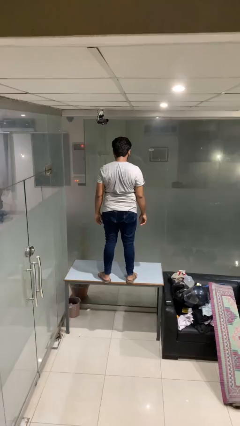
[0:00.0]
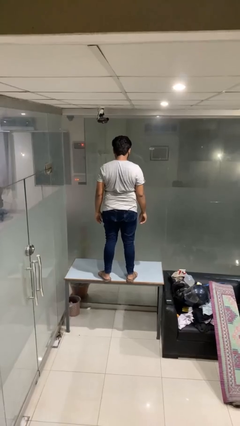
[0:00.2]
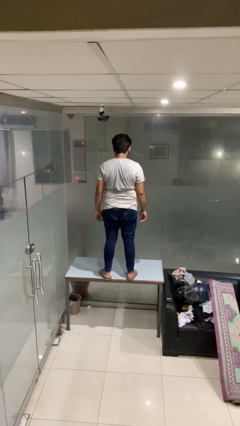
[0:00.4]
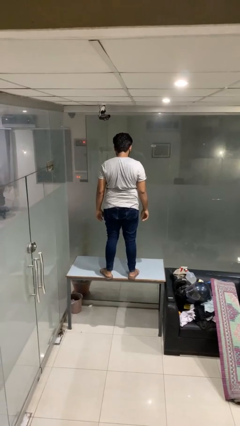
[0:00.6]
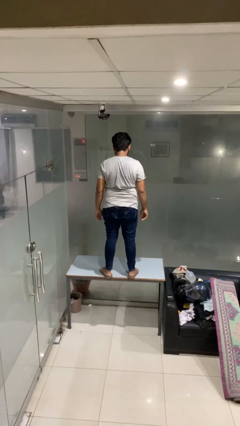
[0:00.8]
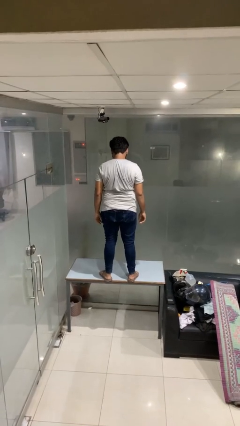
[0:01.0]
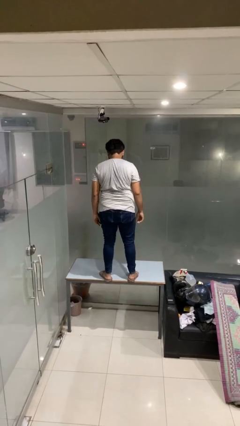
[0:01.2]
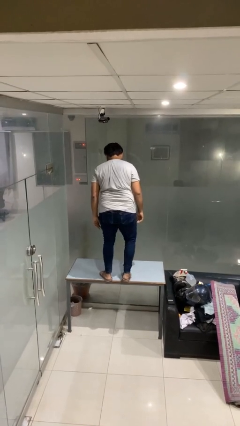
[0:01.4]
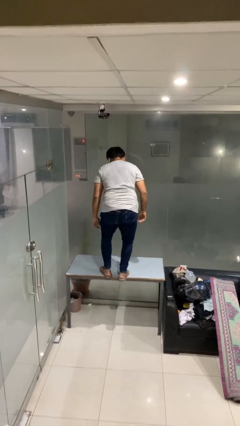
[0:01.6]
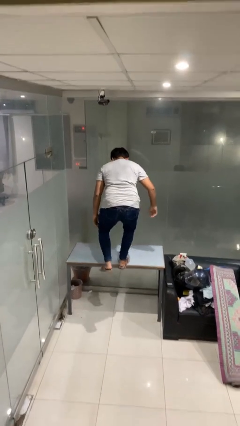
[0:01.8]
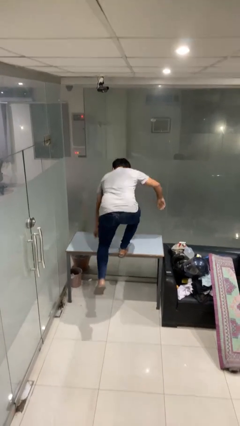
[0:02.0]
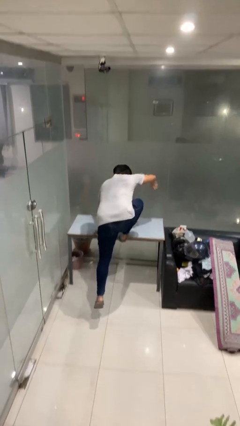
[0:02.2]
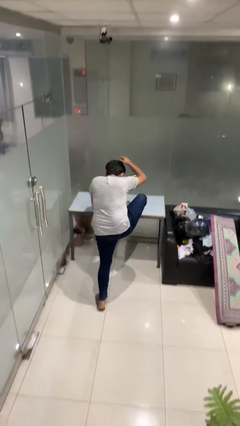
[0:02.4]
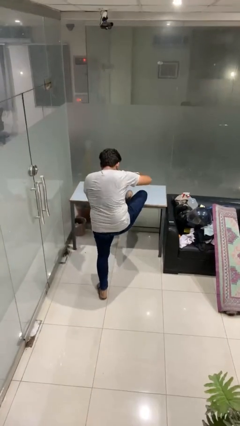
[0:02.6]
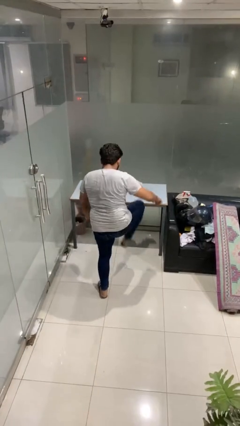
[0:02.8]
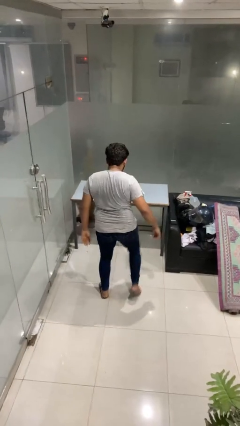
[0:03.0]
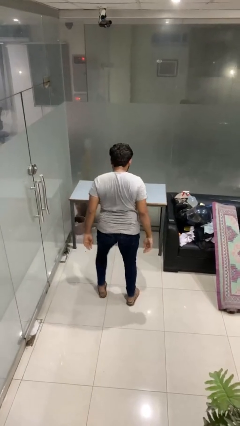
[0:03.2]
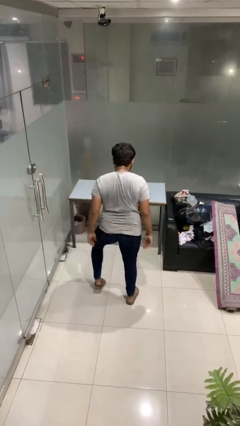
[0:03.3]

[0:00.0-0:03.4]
person climbs off table

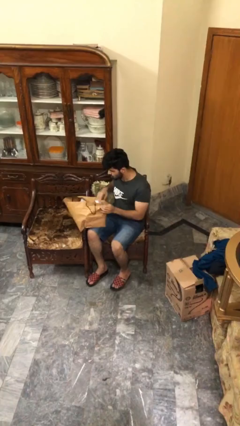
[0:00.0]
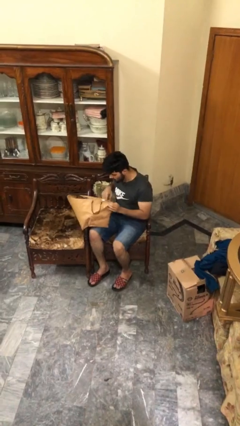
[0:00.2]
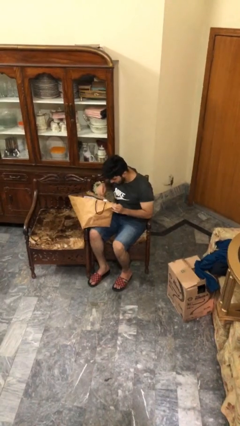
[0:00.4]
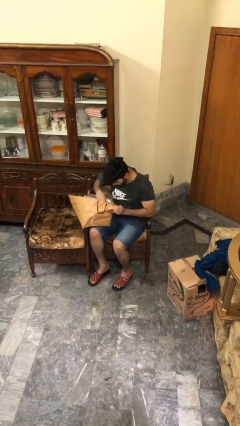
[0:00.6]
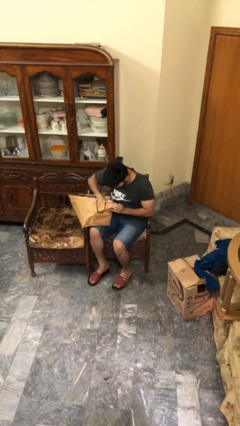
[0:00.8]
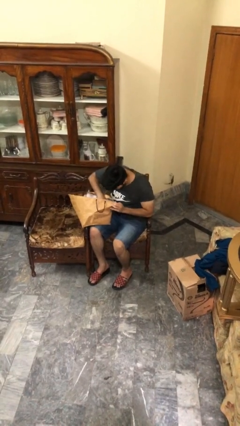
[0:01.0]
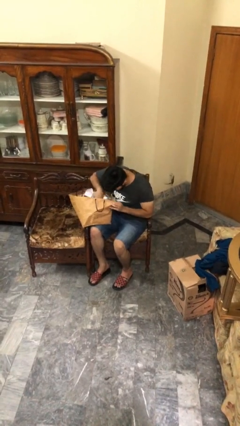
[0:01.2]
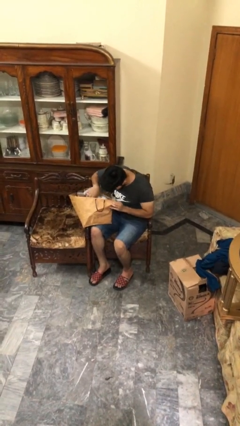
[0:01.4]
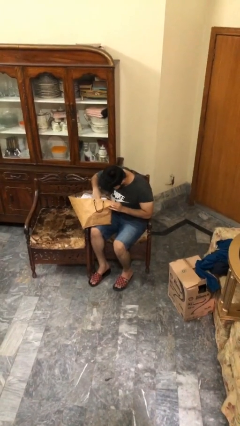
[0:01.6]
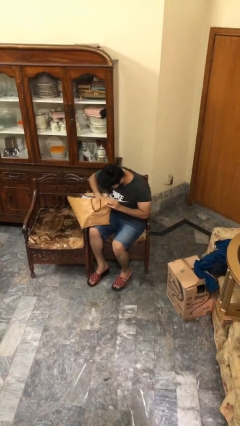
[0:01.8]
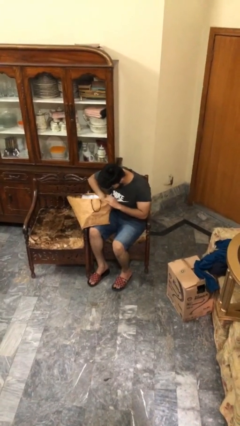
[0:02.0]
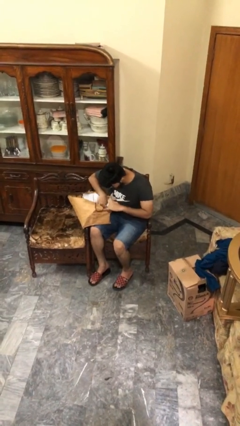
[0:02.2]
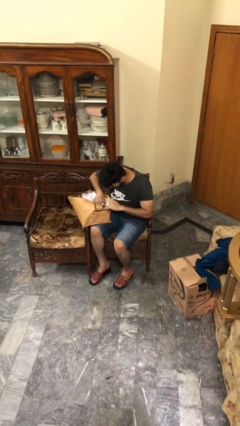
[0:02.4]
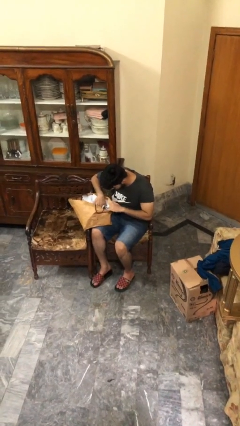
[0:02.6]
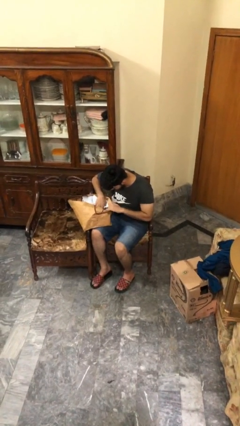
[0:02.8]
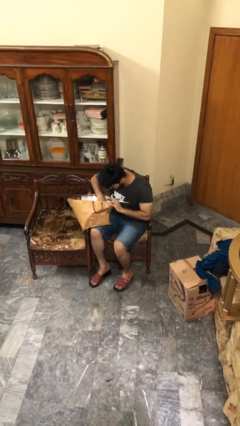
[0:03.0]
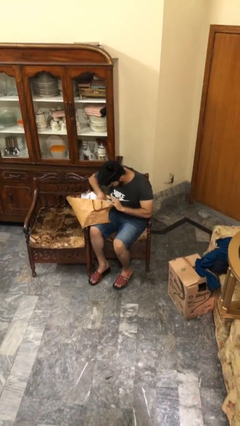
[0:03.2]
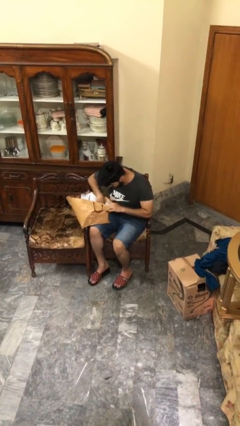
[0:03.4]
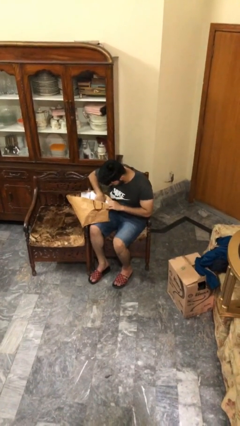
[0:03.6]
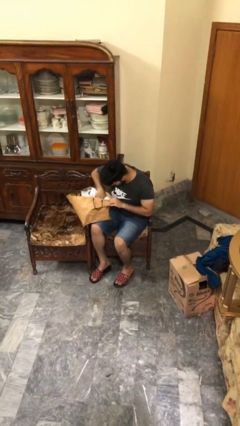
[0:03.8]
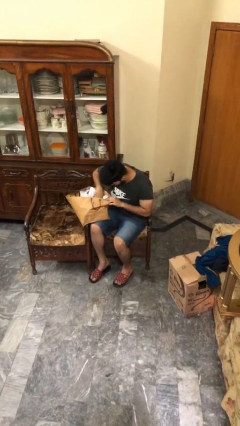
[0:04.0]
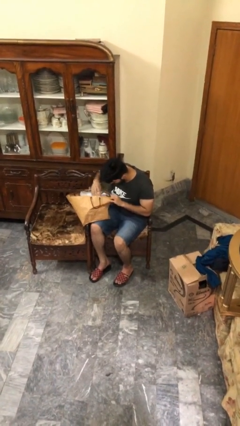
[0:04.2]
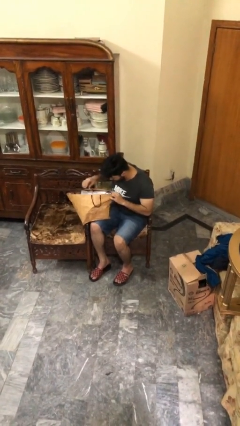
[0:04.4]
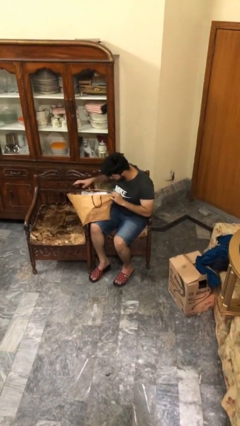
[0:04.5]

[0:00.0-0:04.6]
person searches in bag

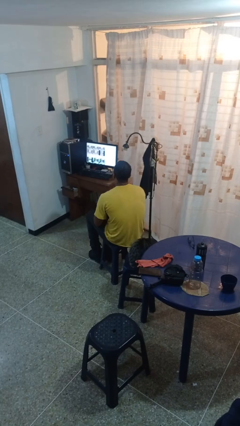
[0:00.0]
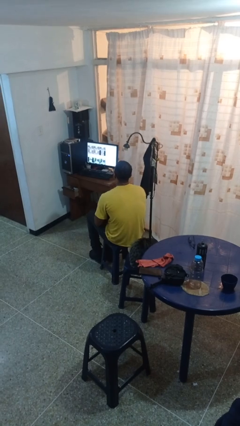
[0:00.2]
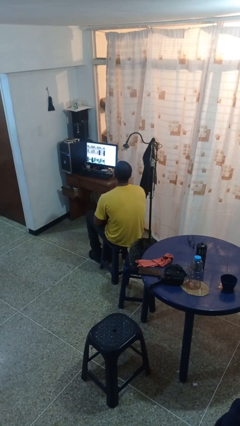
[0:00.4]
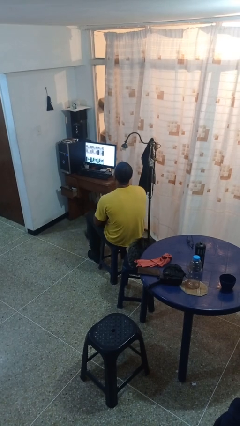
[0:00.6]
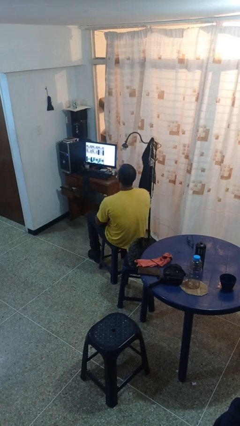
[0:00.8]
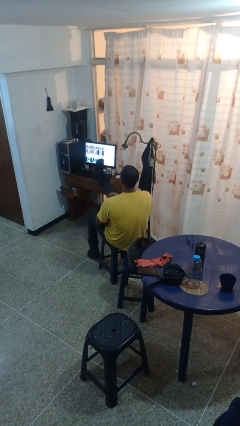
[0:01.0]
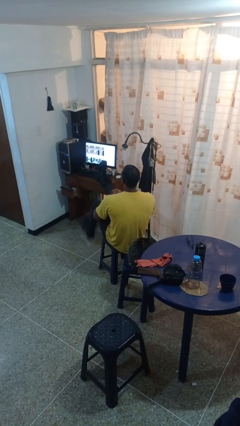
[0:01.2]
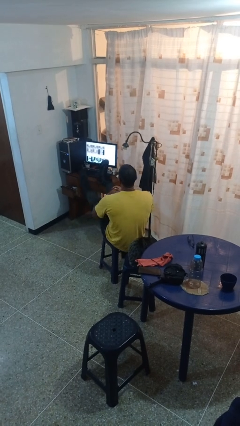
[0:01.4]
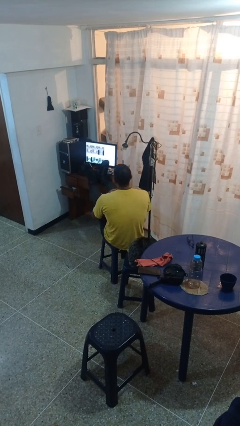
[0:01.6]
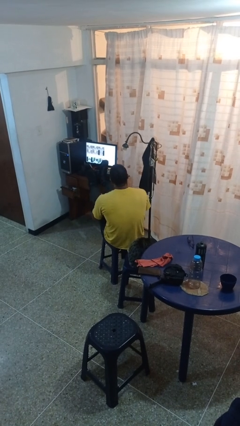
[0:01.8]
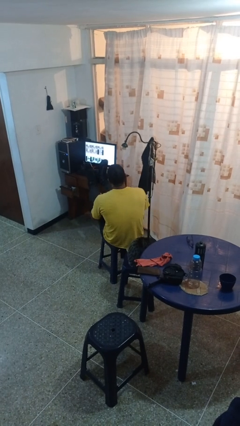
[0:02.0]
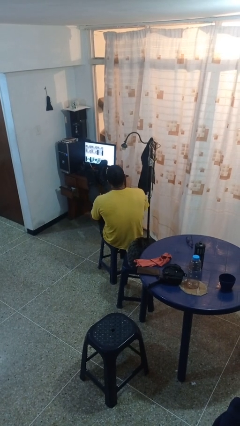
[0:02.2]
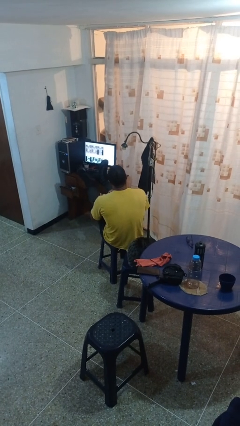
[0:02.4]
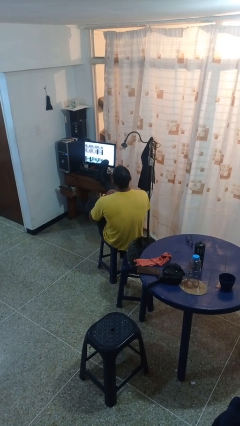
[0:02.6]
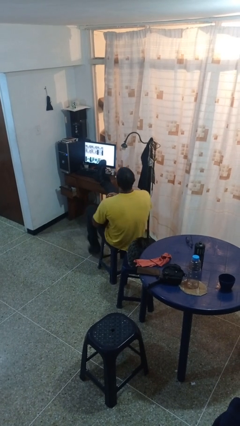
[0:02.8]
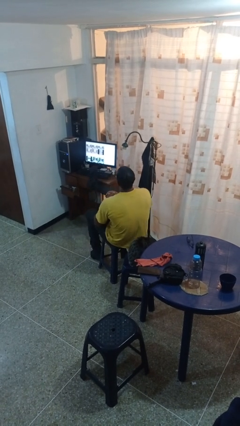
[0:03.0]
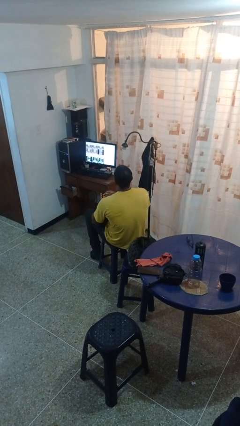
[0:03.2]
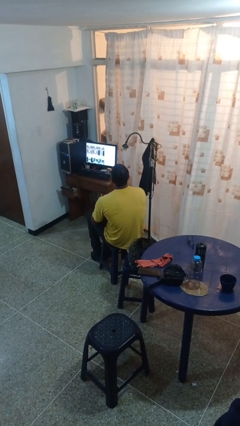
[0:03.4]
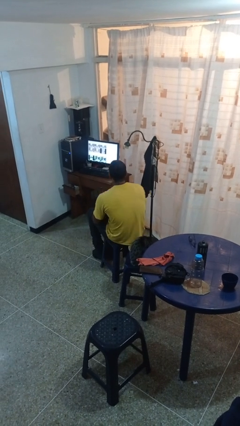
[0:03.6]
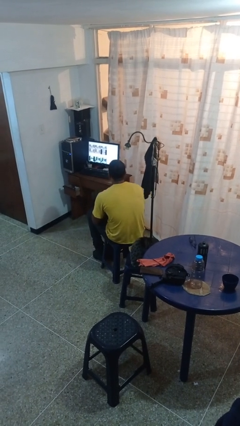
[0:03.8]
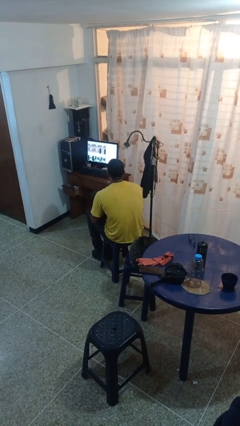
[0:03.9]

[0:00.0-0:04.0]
person puts feet up

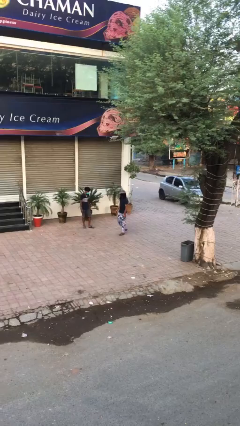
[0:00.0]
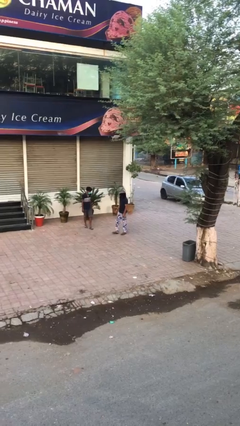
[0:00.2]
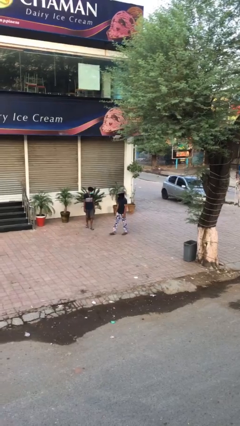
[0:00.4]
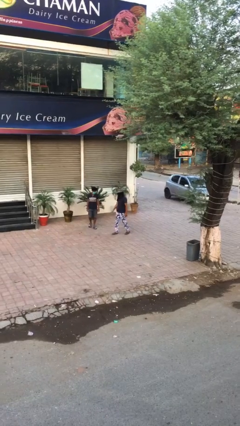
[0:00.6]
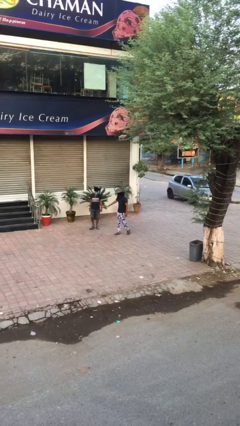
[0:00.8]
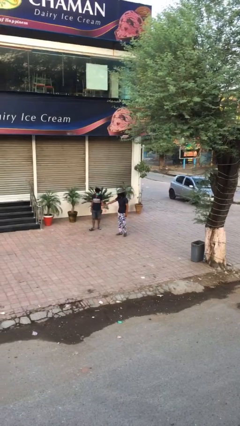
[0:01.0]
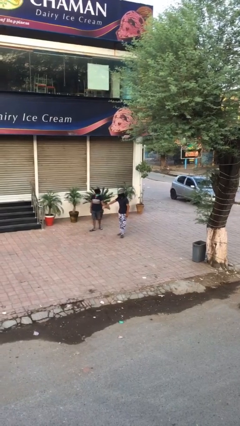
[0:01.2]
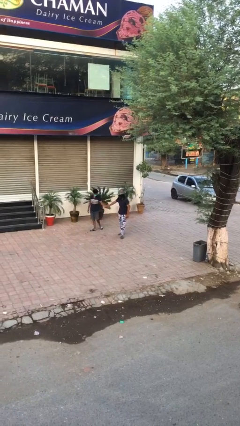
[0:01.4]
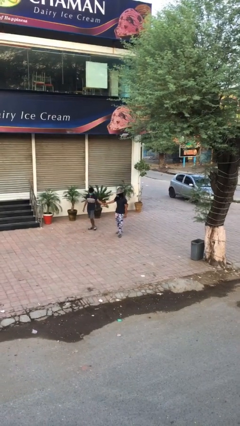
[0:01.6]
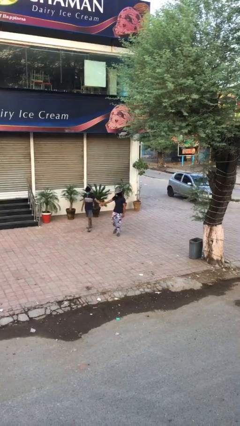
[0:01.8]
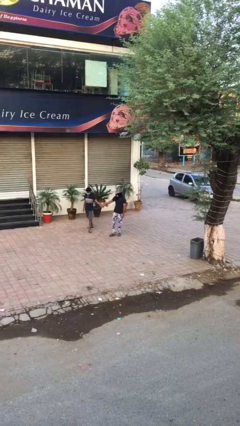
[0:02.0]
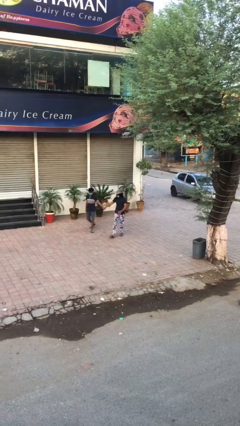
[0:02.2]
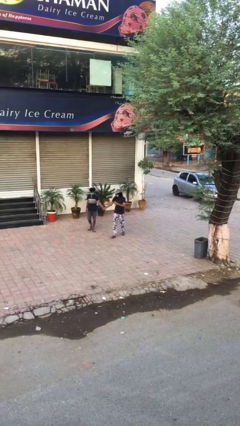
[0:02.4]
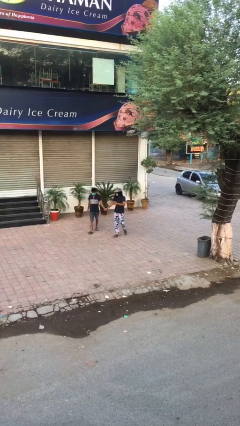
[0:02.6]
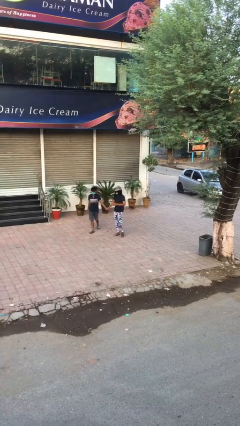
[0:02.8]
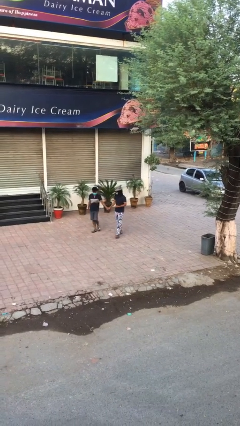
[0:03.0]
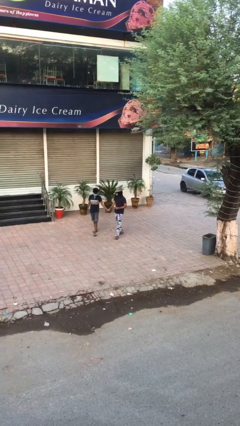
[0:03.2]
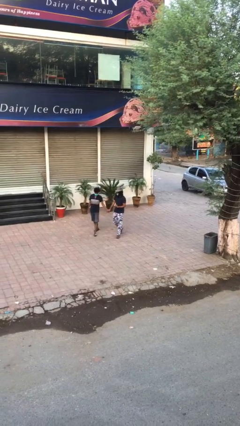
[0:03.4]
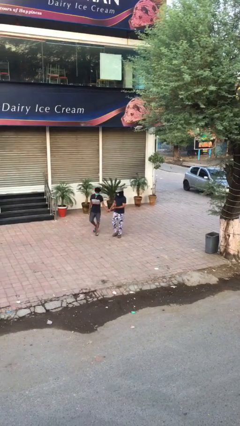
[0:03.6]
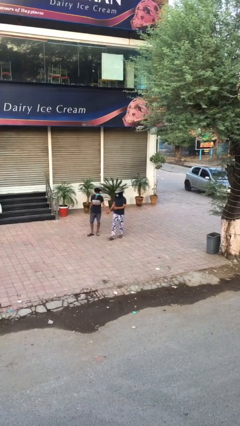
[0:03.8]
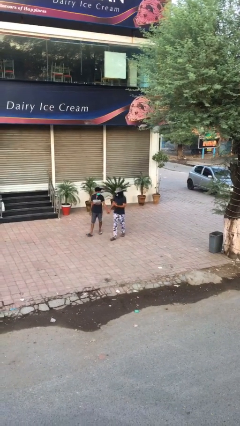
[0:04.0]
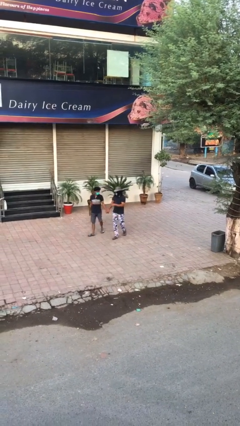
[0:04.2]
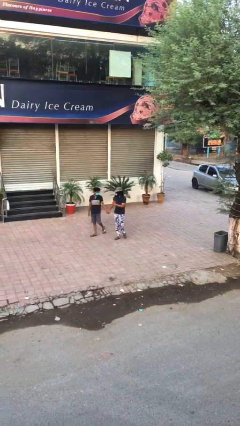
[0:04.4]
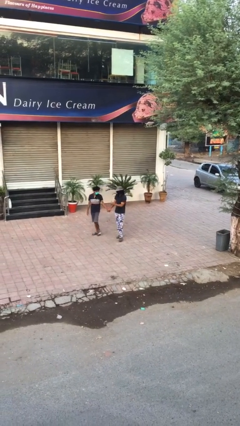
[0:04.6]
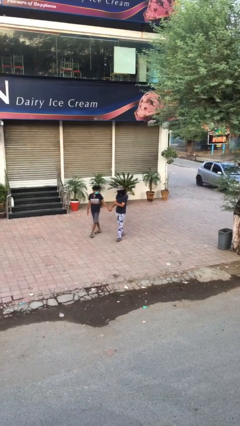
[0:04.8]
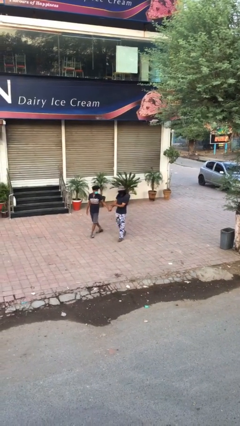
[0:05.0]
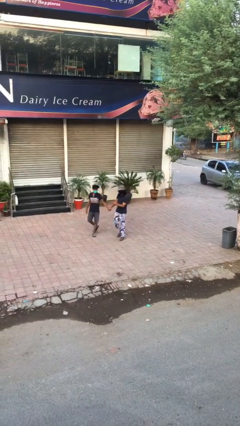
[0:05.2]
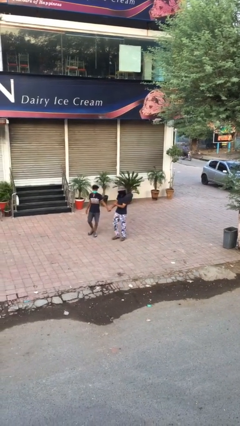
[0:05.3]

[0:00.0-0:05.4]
person holds hand

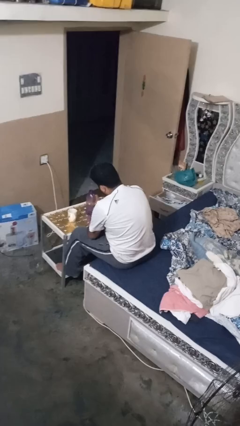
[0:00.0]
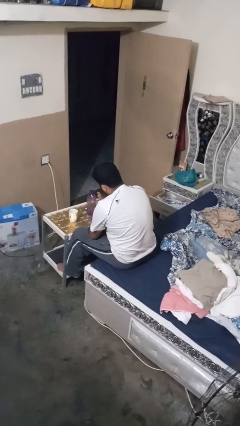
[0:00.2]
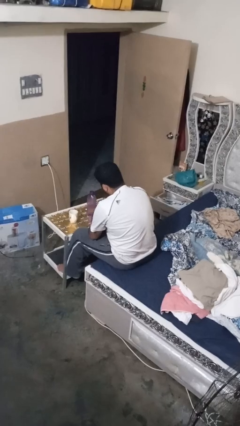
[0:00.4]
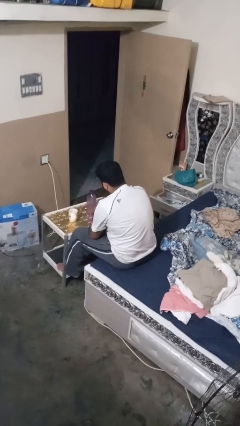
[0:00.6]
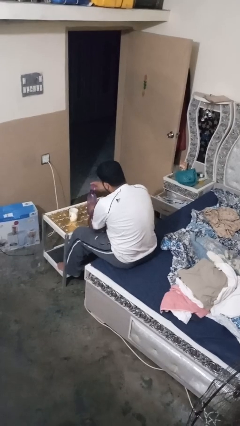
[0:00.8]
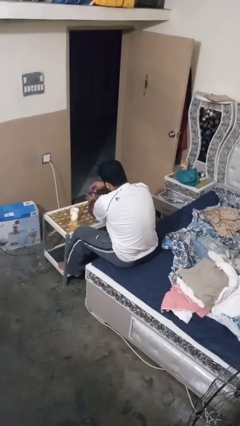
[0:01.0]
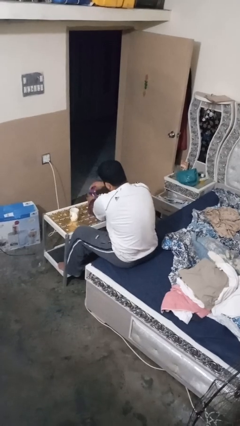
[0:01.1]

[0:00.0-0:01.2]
person screws lid to bottle
